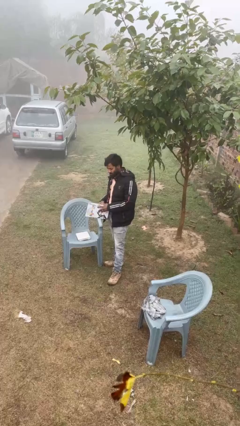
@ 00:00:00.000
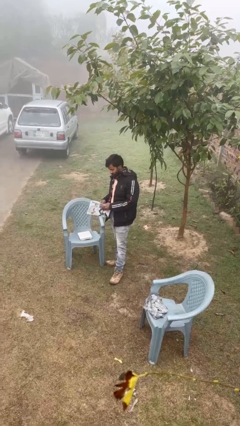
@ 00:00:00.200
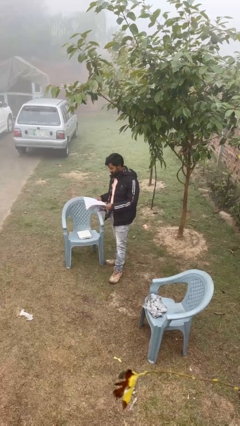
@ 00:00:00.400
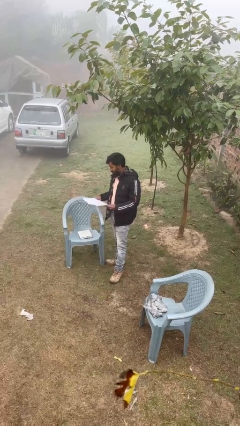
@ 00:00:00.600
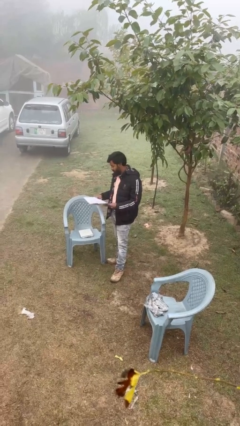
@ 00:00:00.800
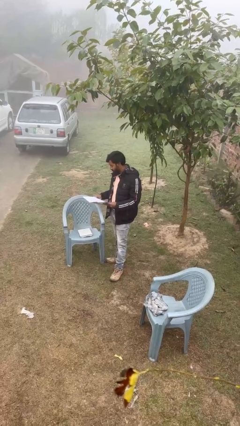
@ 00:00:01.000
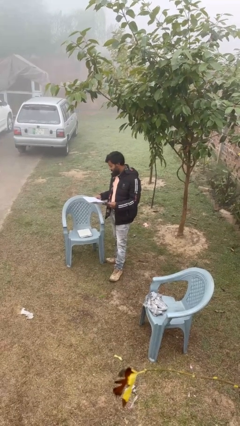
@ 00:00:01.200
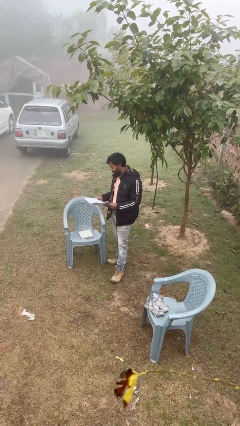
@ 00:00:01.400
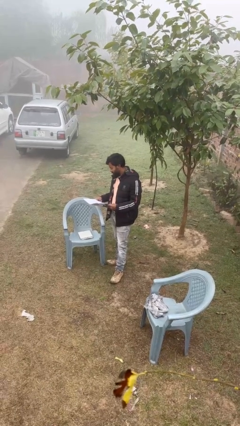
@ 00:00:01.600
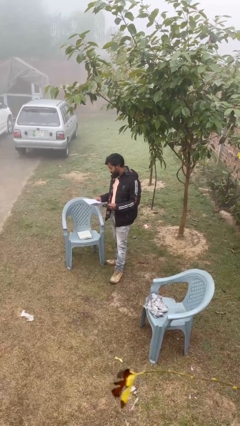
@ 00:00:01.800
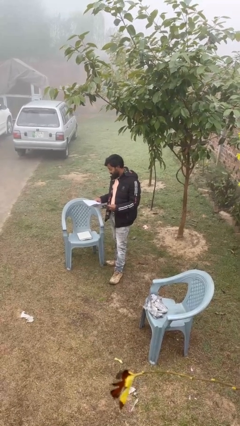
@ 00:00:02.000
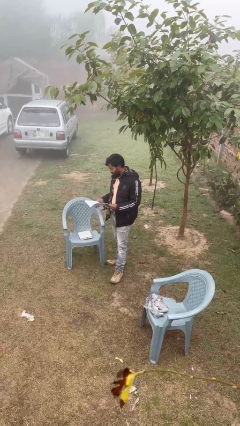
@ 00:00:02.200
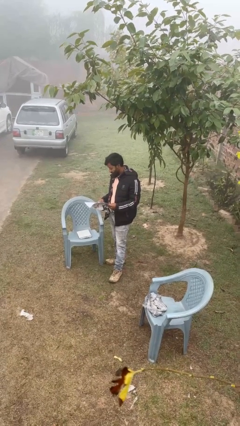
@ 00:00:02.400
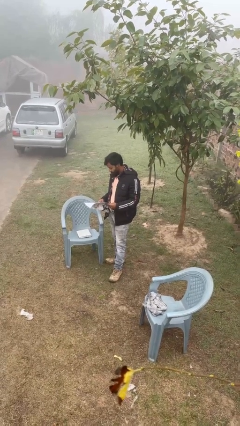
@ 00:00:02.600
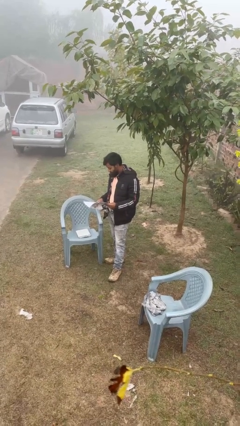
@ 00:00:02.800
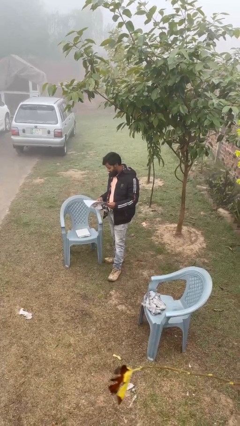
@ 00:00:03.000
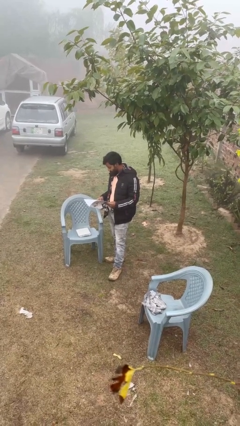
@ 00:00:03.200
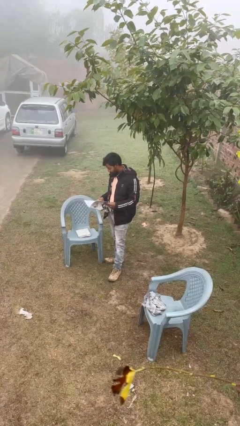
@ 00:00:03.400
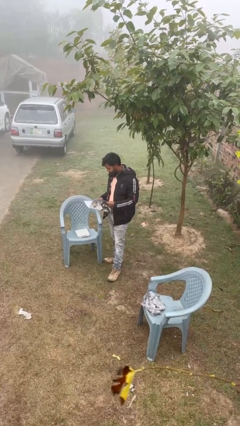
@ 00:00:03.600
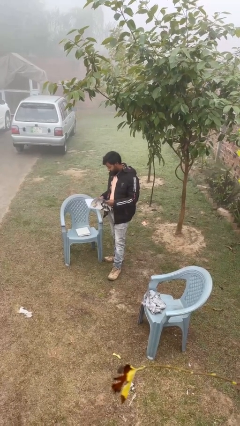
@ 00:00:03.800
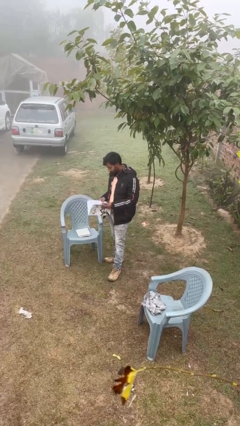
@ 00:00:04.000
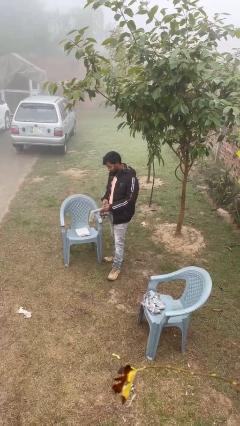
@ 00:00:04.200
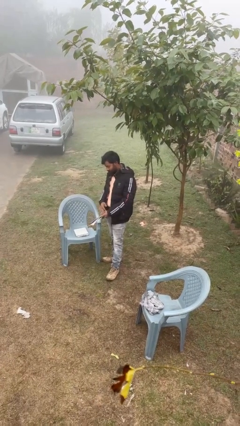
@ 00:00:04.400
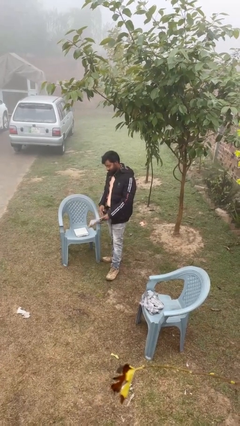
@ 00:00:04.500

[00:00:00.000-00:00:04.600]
person reads document

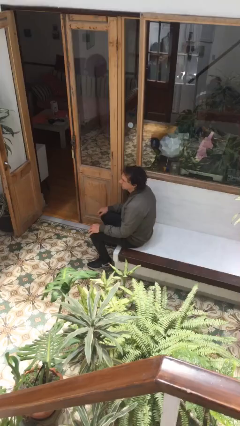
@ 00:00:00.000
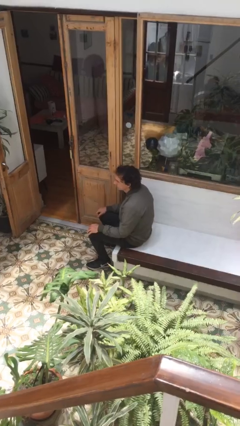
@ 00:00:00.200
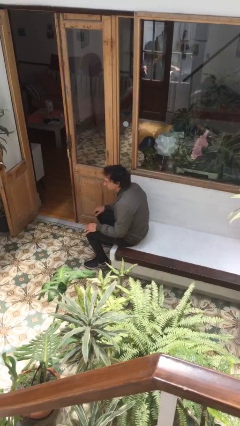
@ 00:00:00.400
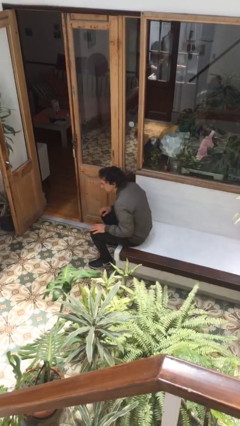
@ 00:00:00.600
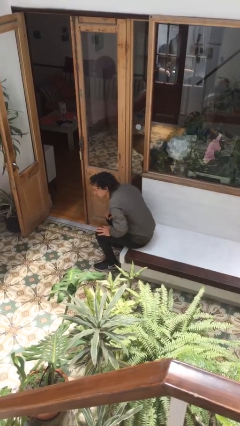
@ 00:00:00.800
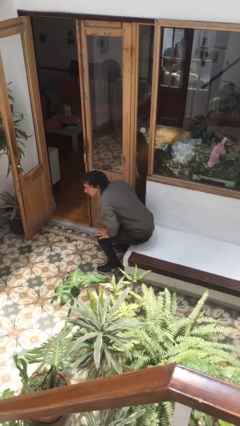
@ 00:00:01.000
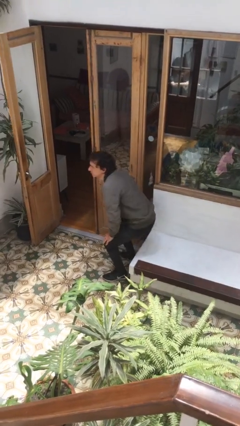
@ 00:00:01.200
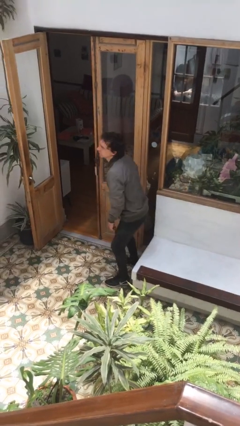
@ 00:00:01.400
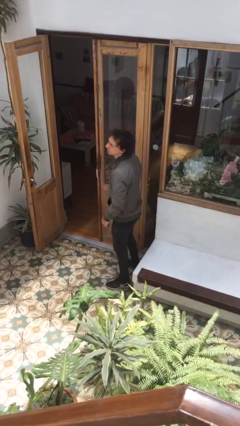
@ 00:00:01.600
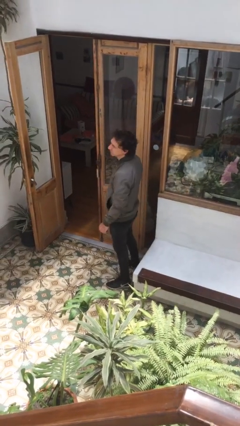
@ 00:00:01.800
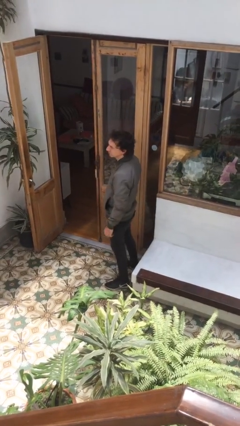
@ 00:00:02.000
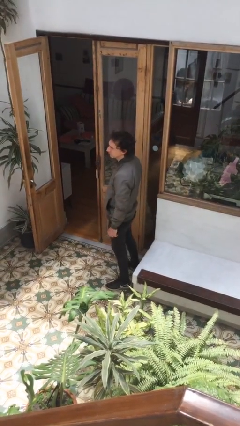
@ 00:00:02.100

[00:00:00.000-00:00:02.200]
person stands up

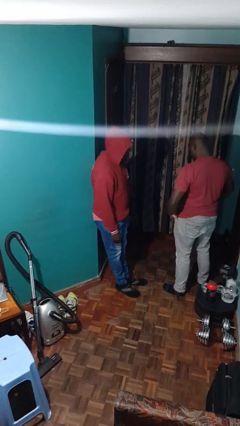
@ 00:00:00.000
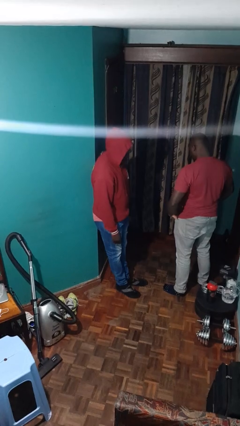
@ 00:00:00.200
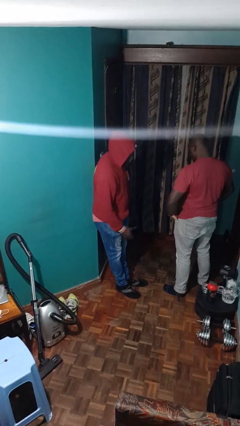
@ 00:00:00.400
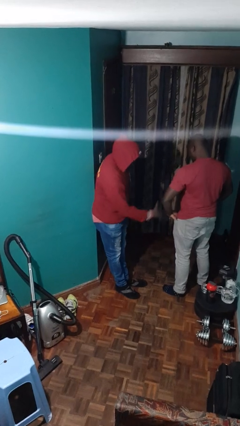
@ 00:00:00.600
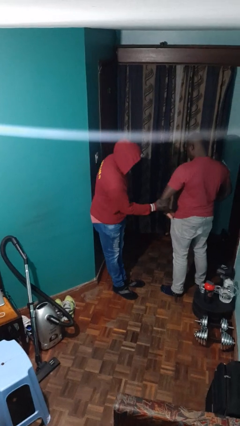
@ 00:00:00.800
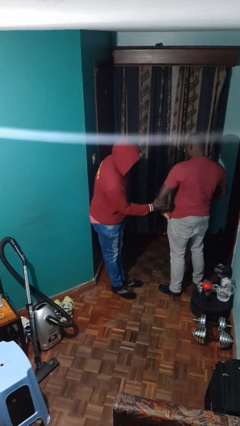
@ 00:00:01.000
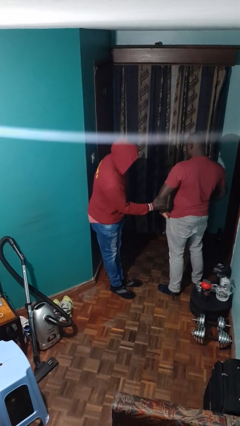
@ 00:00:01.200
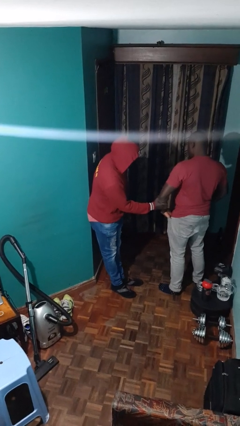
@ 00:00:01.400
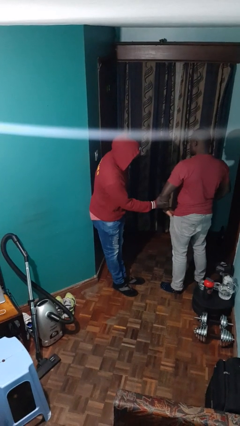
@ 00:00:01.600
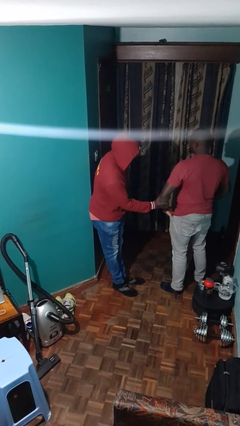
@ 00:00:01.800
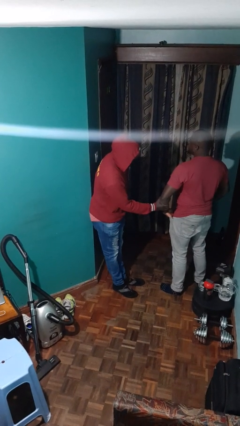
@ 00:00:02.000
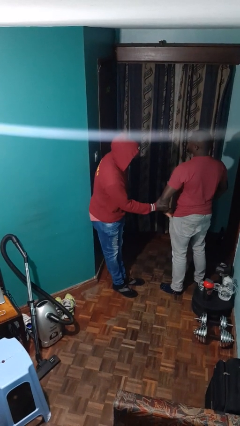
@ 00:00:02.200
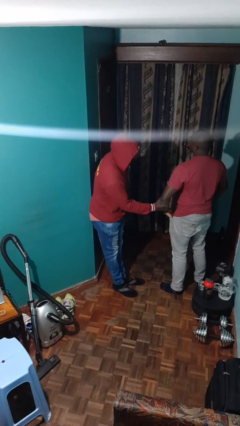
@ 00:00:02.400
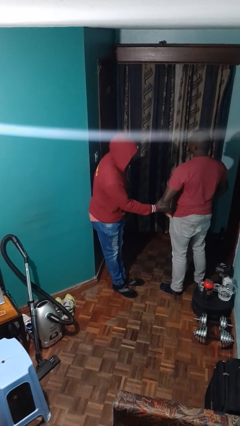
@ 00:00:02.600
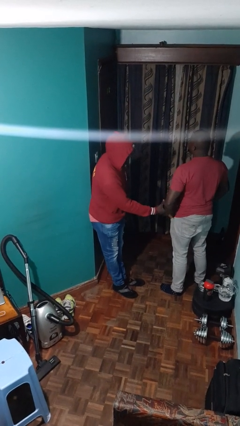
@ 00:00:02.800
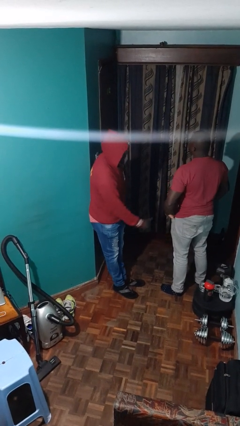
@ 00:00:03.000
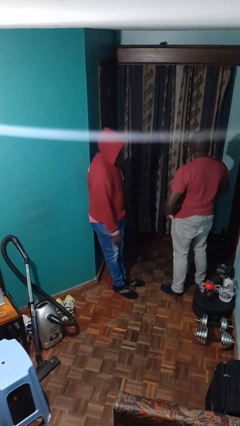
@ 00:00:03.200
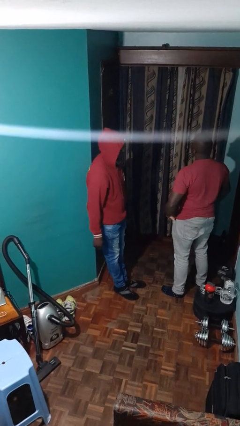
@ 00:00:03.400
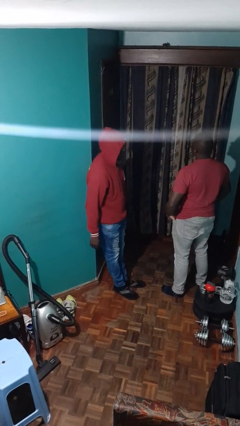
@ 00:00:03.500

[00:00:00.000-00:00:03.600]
person grabs person by forearm

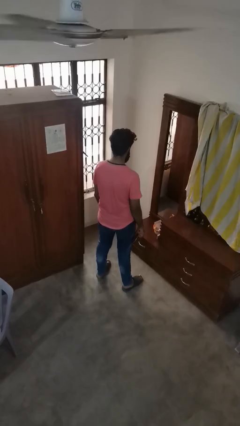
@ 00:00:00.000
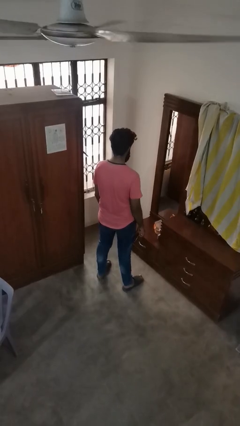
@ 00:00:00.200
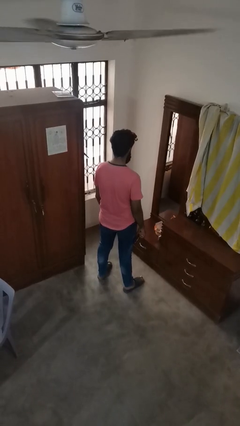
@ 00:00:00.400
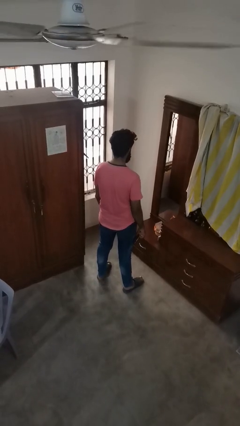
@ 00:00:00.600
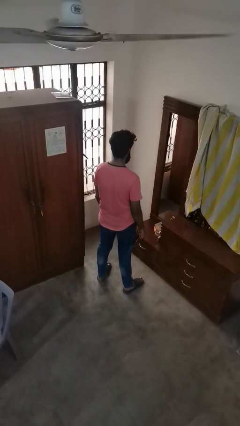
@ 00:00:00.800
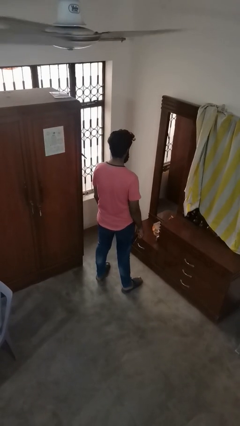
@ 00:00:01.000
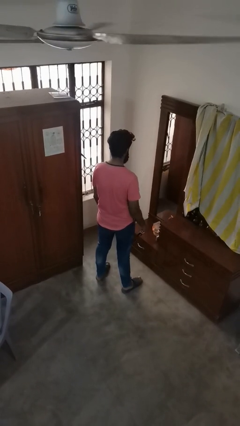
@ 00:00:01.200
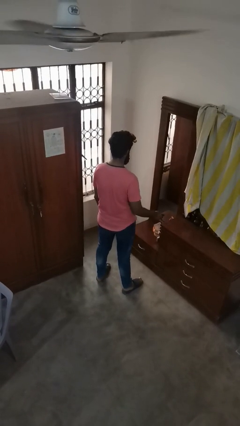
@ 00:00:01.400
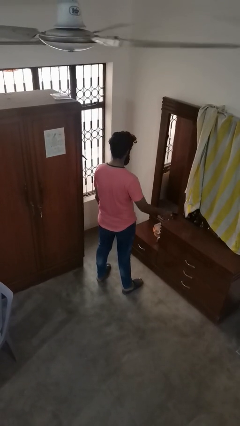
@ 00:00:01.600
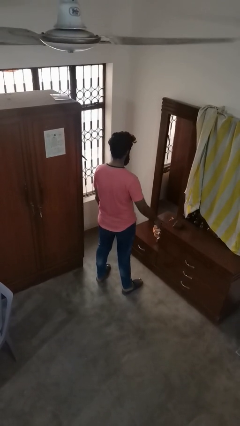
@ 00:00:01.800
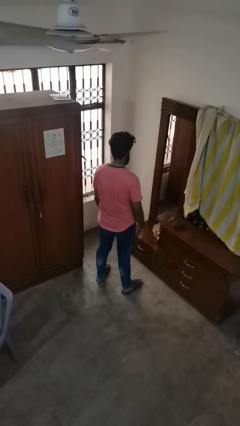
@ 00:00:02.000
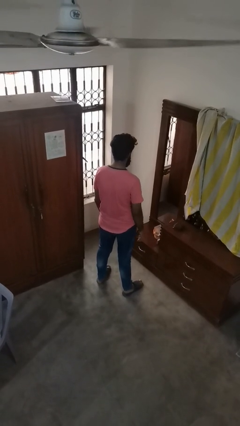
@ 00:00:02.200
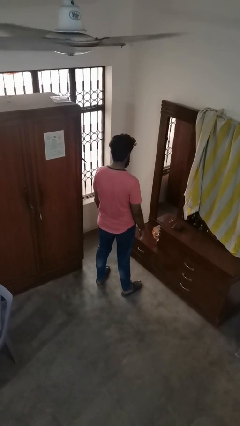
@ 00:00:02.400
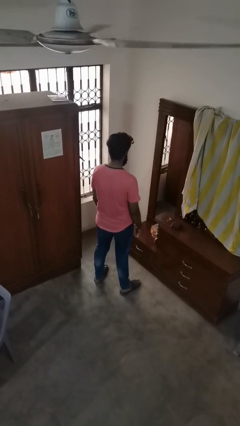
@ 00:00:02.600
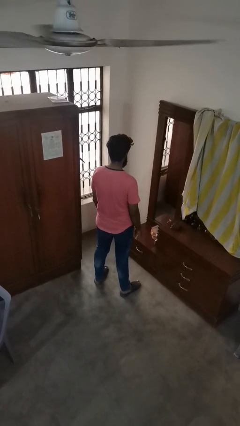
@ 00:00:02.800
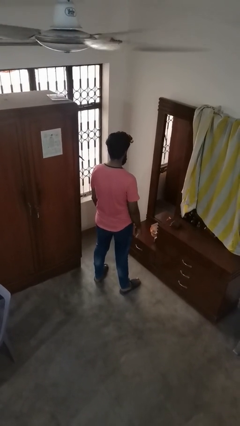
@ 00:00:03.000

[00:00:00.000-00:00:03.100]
person throws object to ground

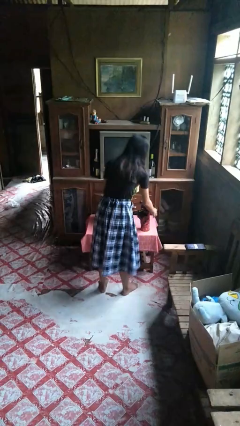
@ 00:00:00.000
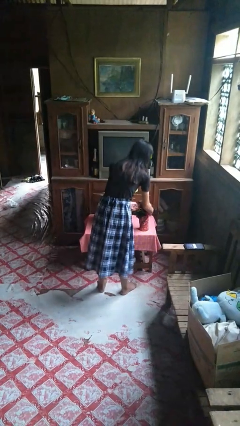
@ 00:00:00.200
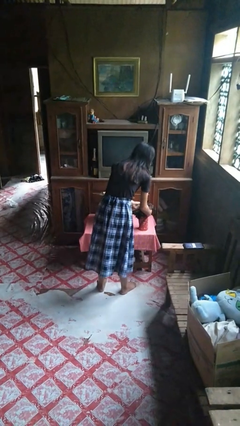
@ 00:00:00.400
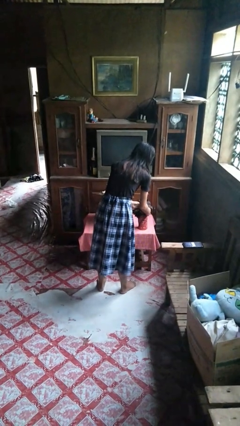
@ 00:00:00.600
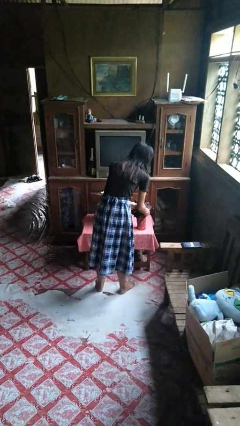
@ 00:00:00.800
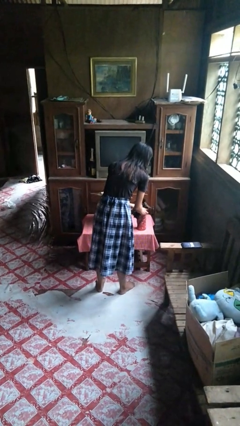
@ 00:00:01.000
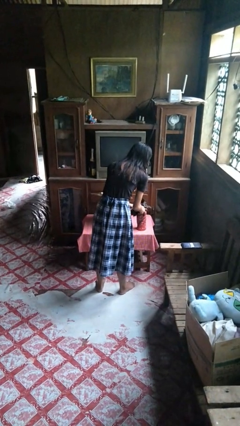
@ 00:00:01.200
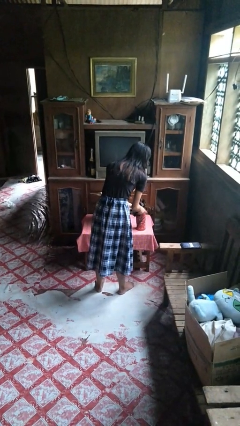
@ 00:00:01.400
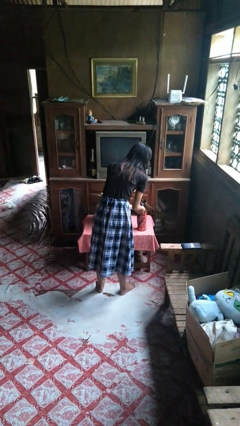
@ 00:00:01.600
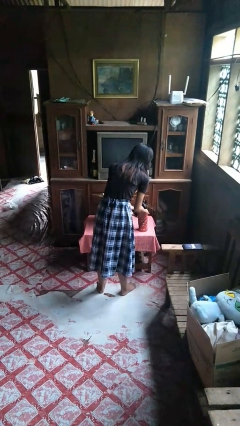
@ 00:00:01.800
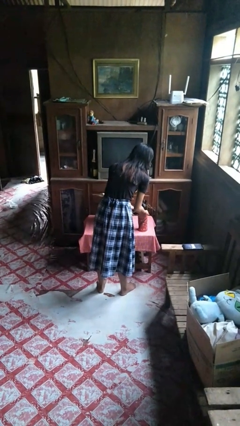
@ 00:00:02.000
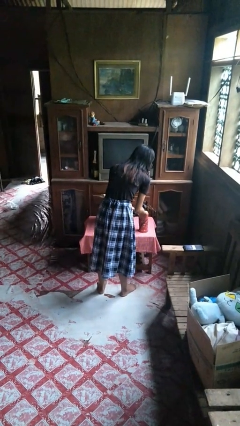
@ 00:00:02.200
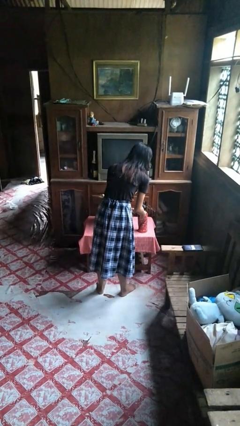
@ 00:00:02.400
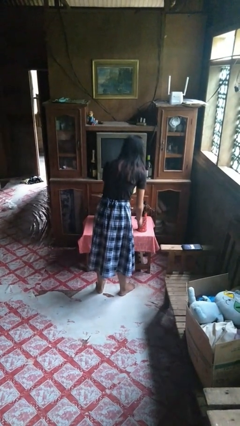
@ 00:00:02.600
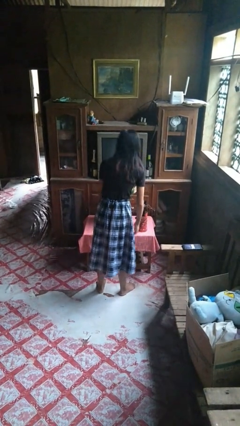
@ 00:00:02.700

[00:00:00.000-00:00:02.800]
person arranges flowers in vase

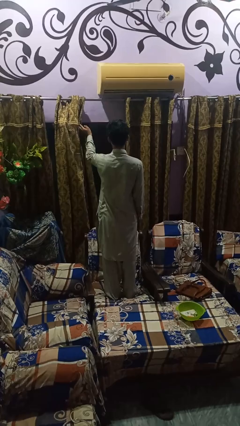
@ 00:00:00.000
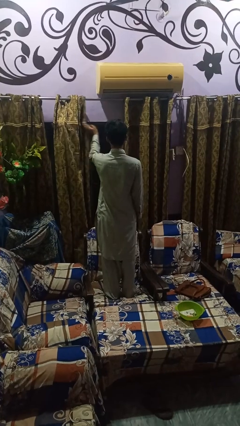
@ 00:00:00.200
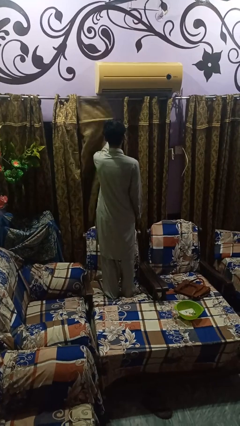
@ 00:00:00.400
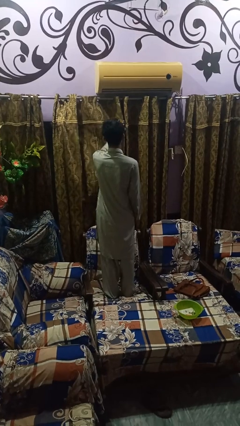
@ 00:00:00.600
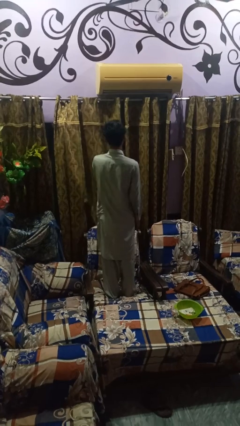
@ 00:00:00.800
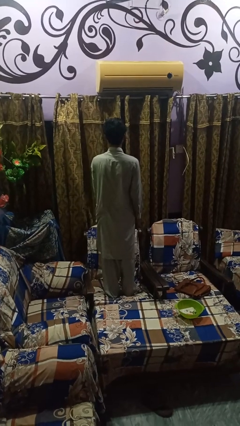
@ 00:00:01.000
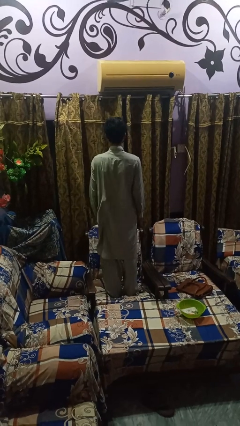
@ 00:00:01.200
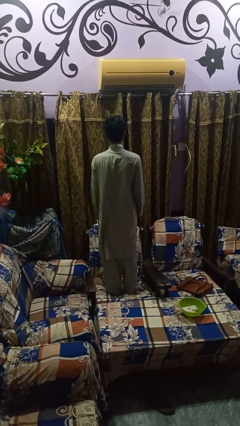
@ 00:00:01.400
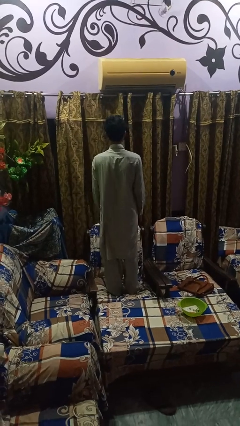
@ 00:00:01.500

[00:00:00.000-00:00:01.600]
person closes curtains
